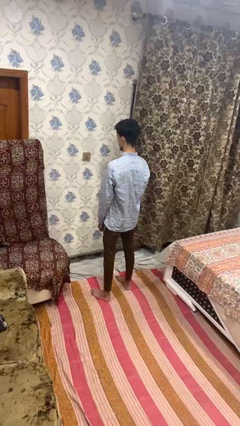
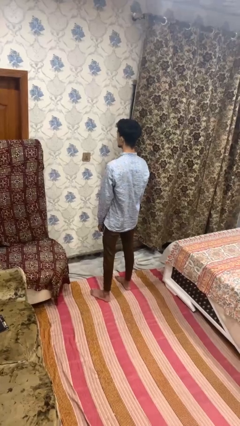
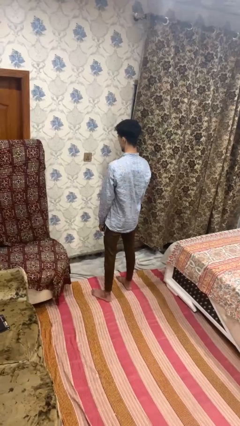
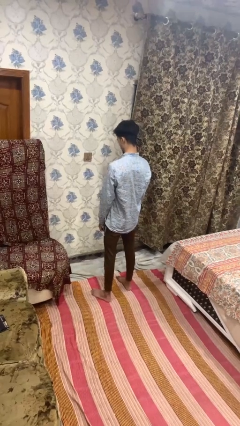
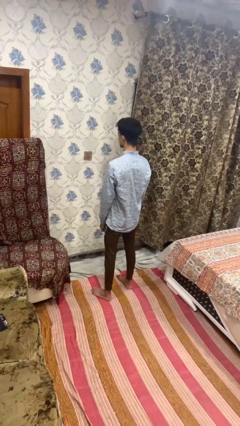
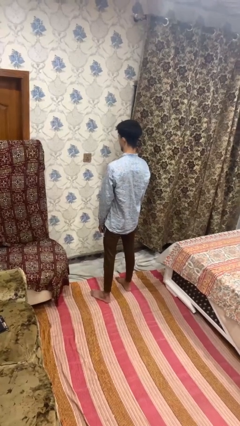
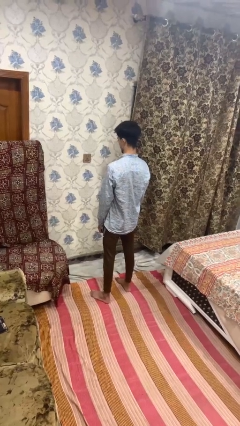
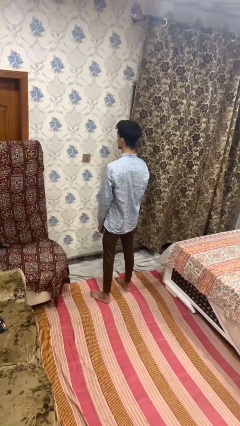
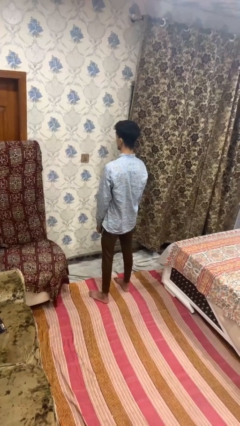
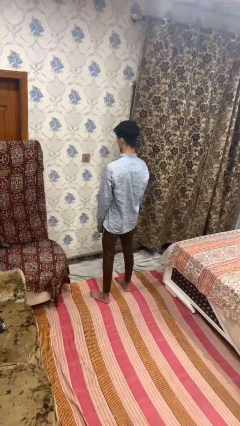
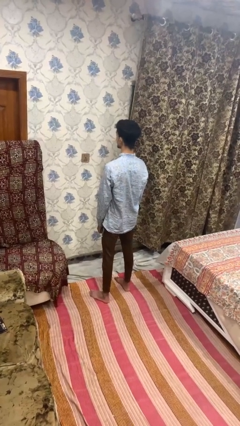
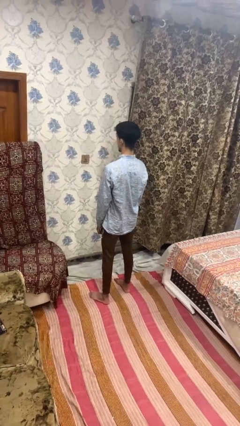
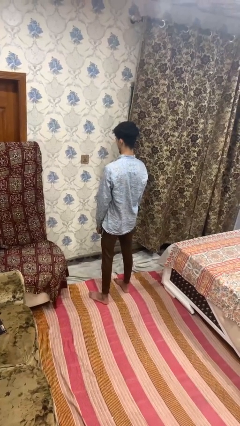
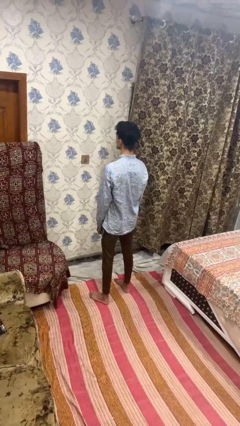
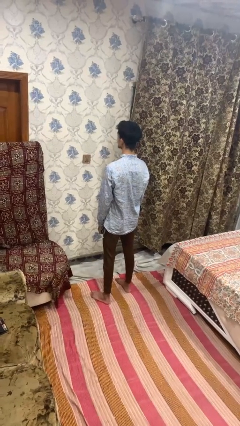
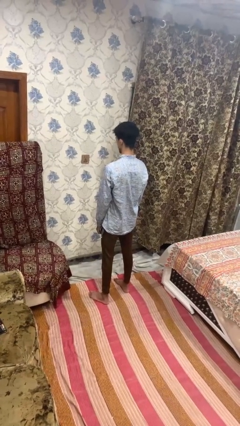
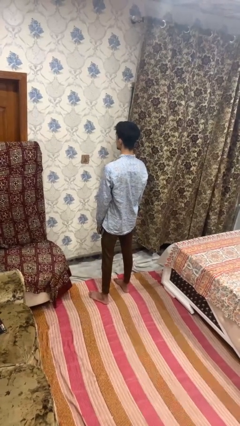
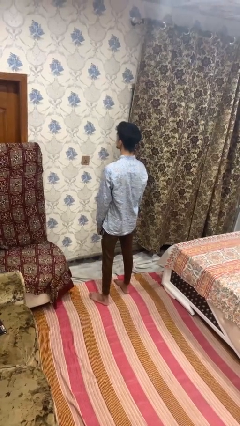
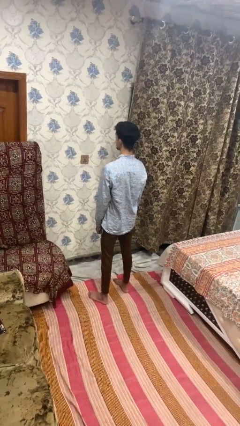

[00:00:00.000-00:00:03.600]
person nods head

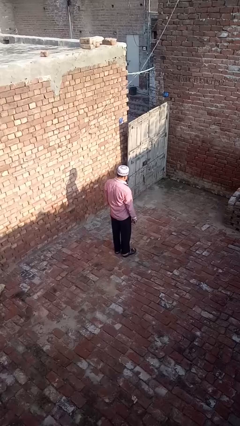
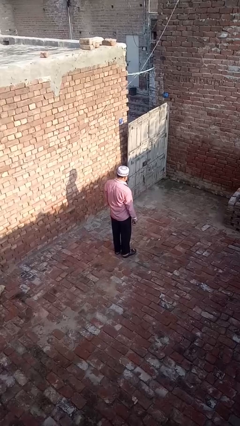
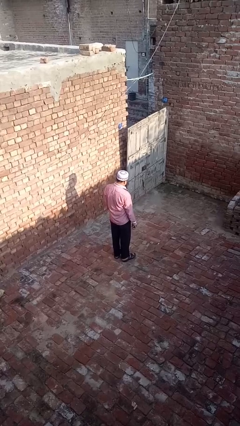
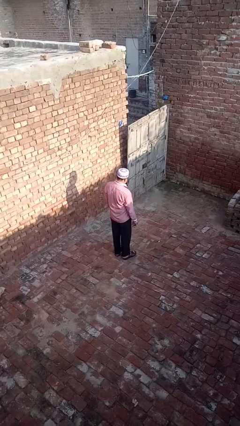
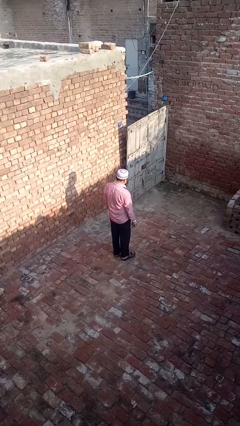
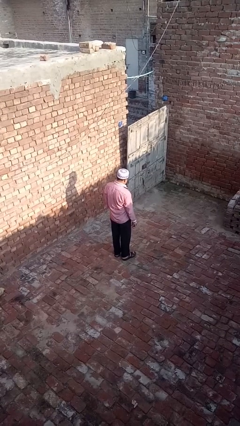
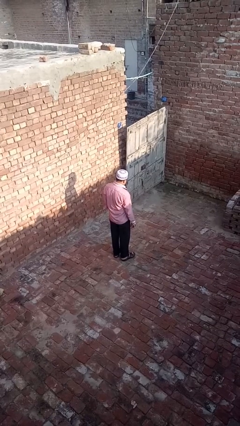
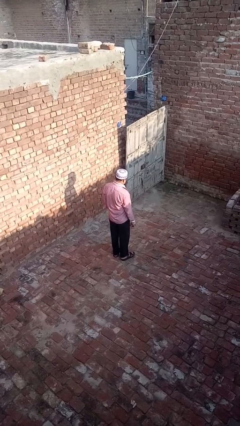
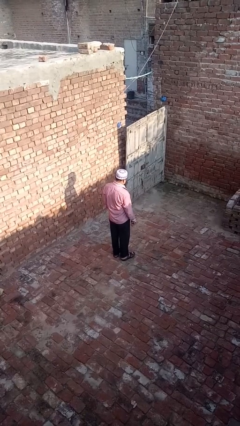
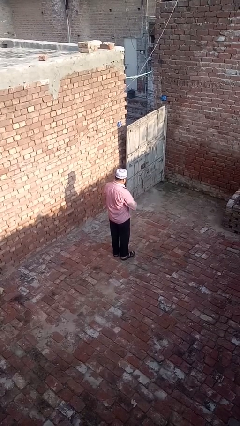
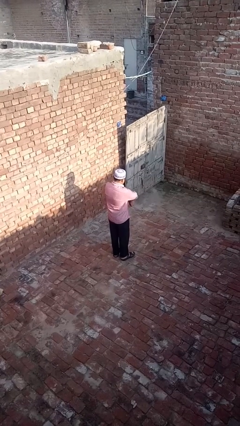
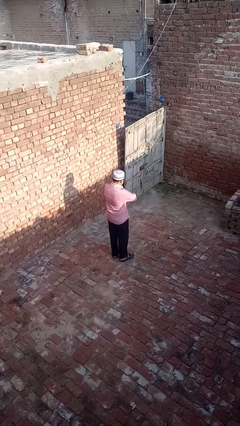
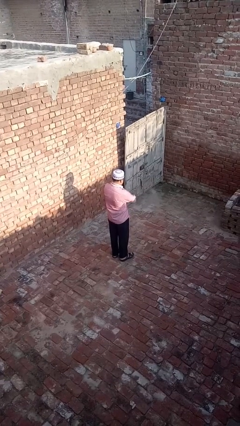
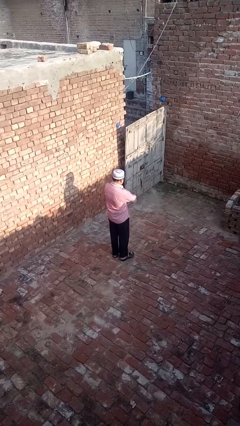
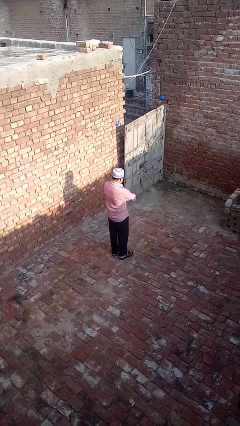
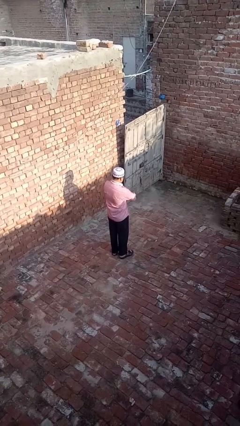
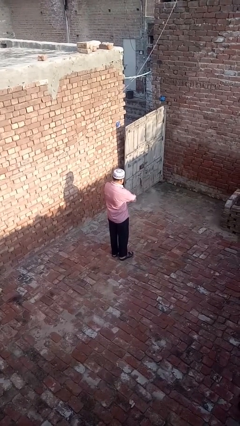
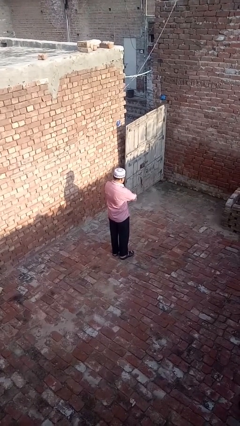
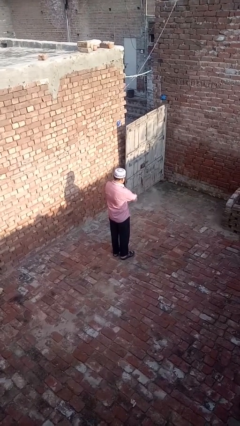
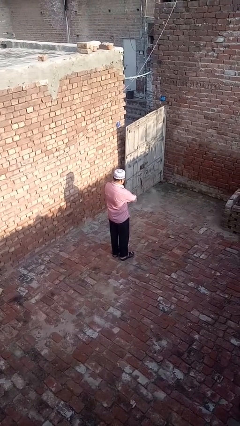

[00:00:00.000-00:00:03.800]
person crosses arms

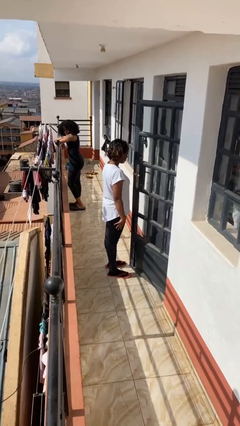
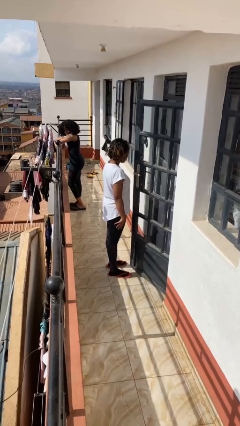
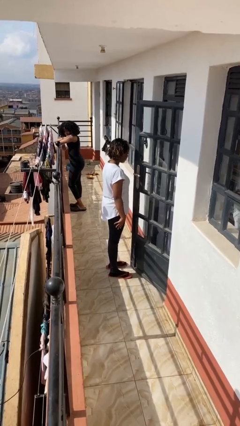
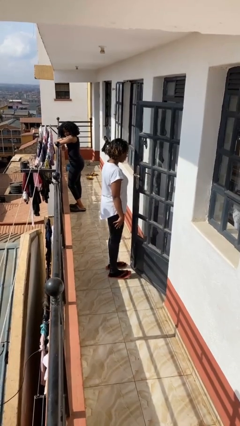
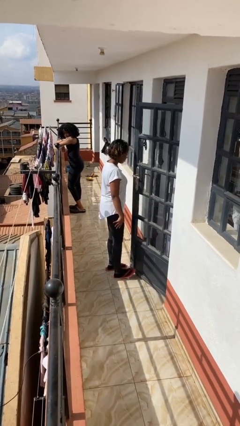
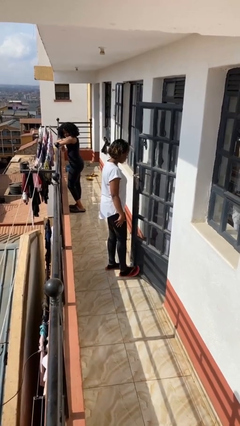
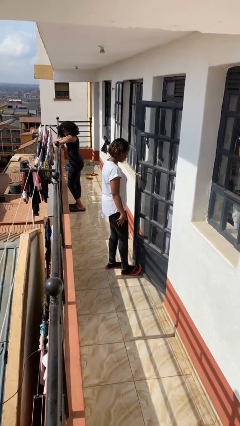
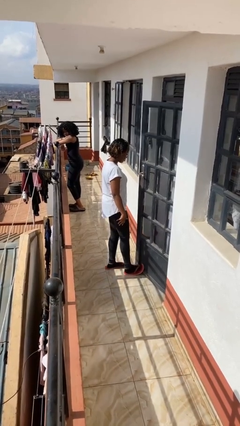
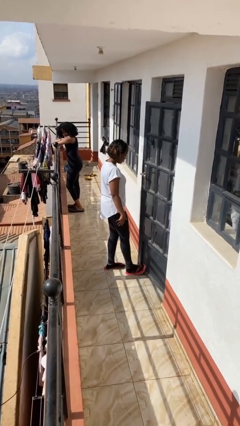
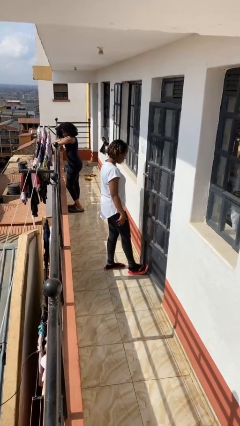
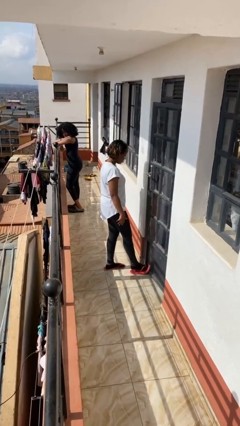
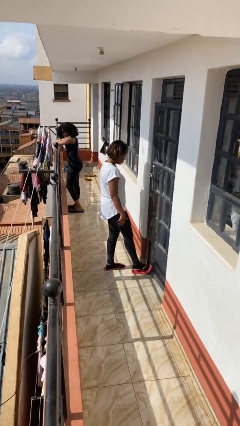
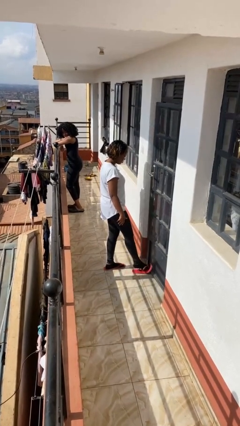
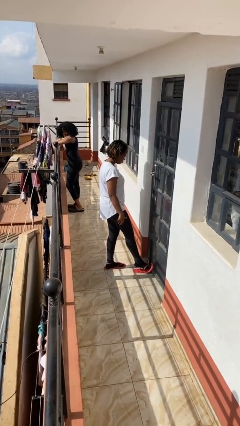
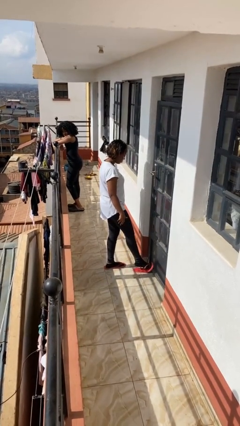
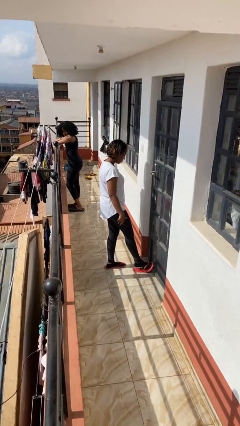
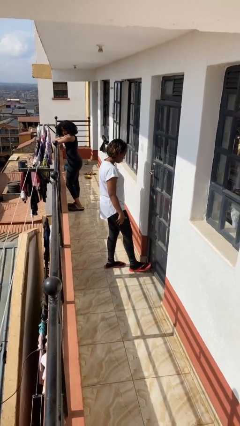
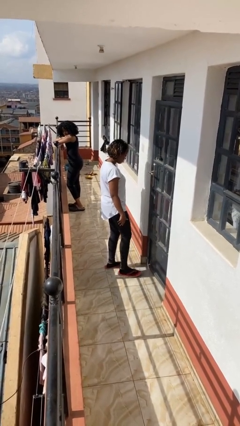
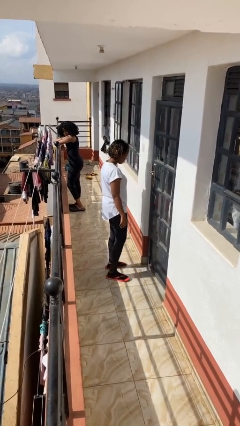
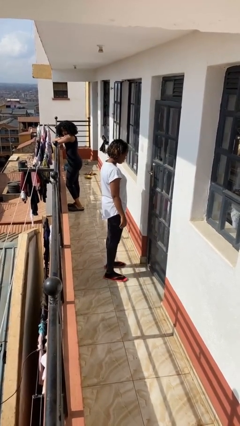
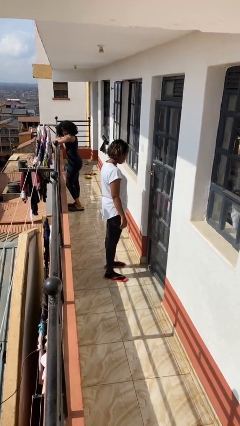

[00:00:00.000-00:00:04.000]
person closes door with foot

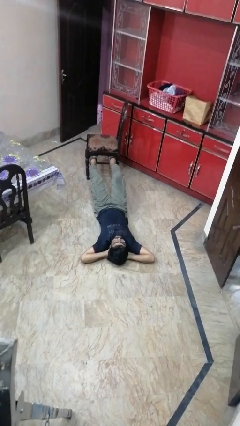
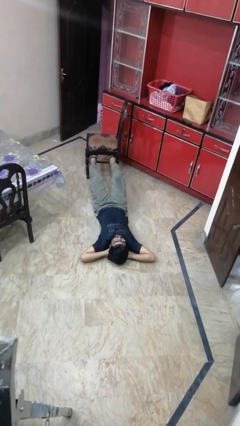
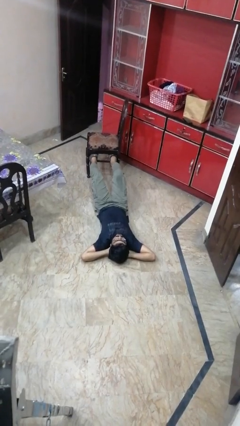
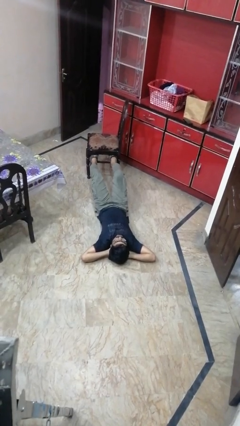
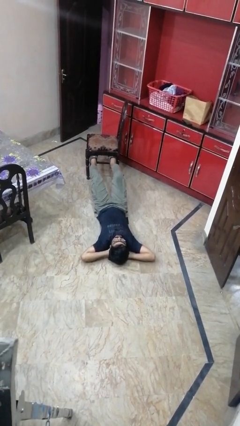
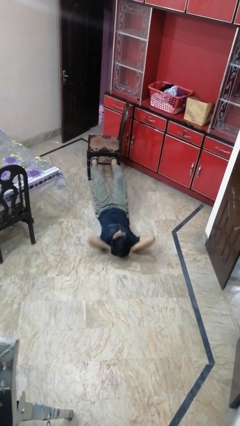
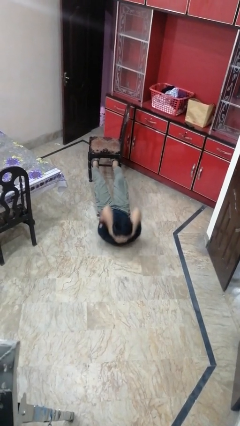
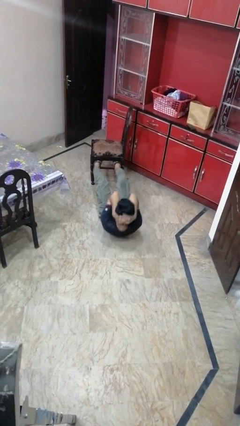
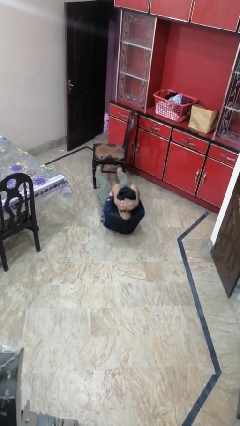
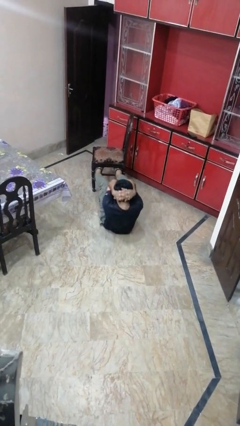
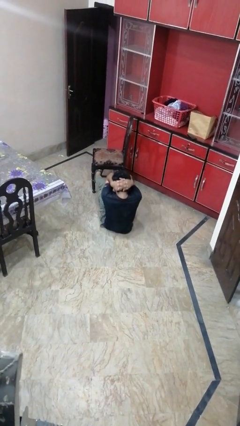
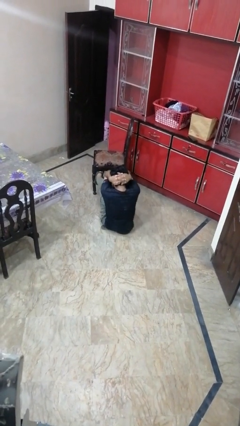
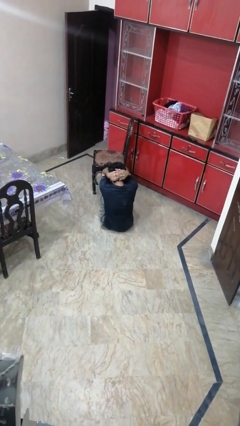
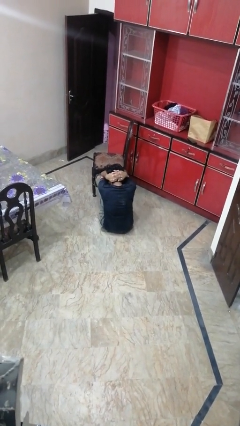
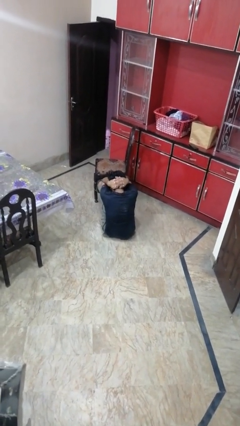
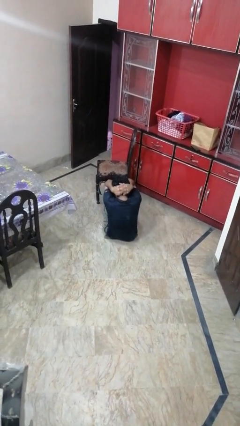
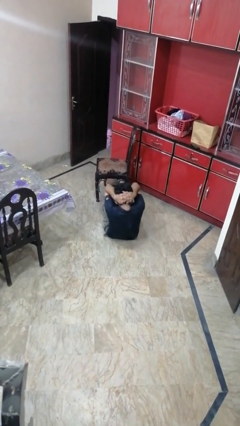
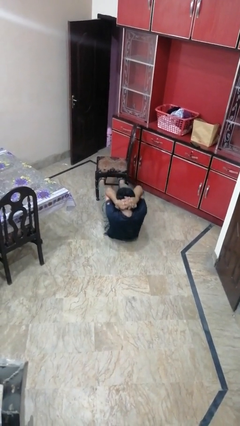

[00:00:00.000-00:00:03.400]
person exercises with situp

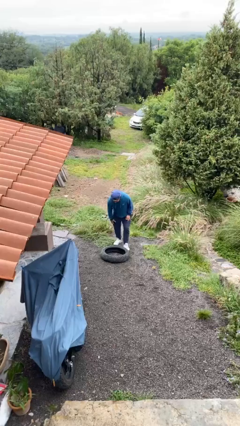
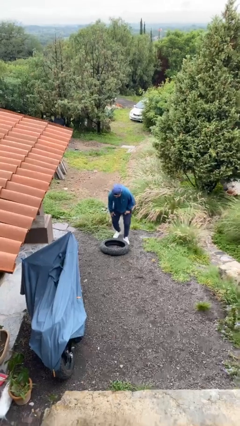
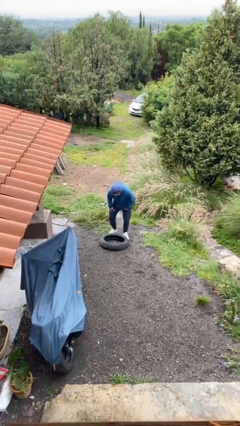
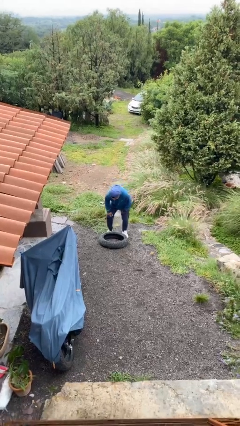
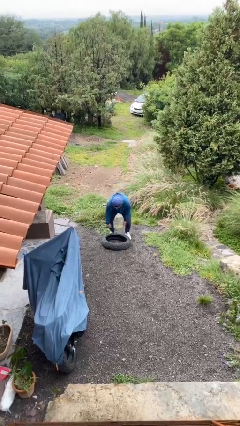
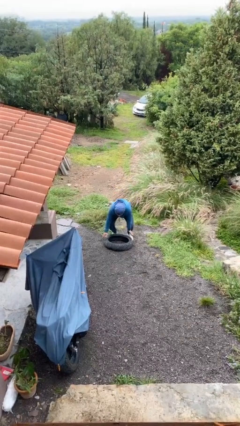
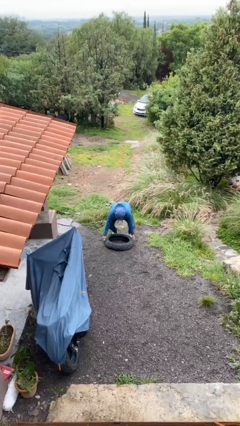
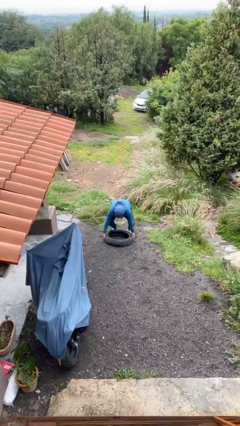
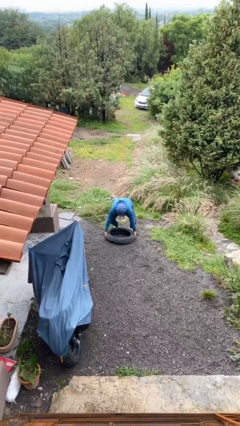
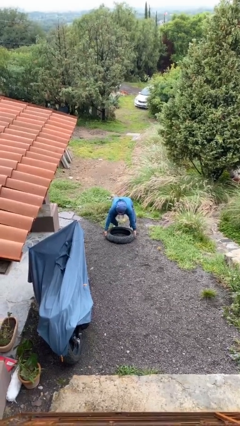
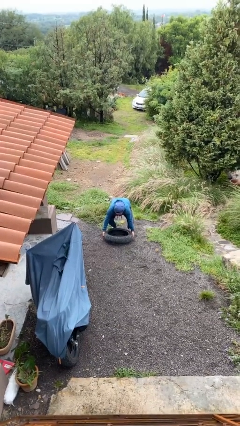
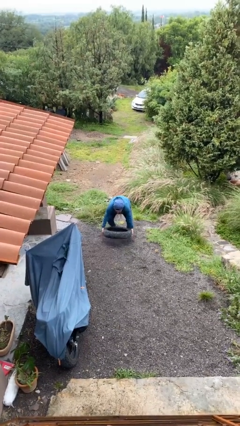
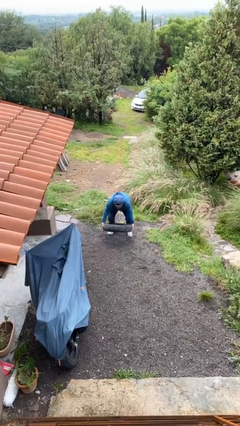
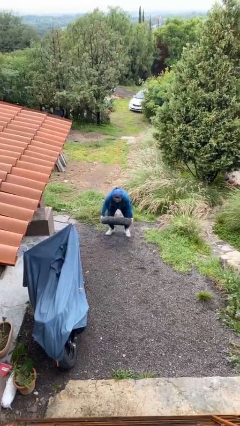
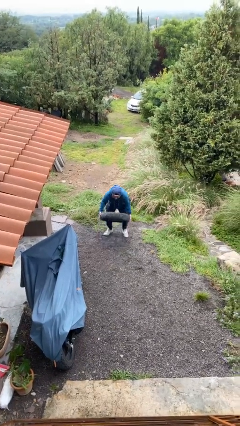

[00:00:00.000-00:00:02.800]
person picks up object from floor
